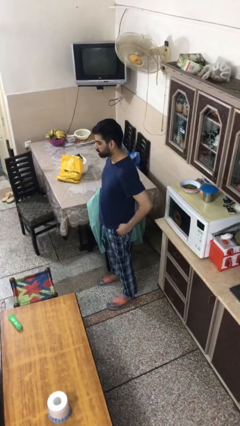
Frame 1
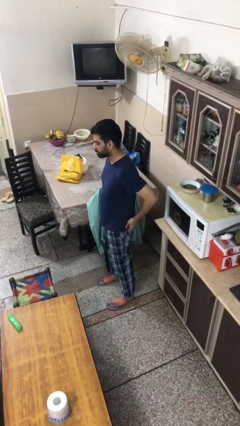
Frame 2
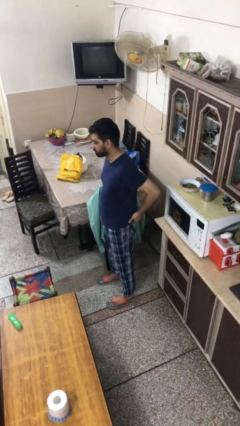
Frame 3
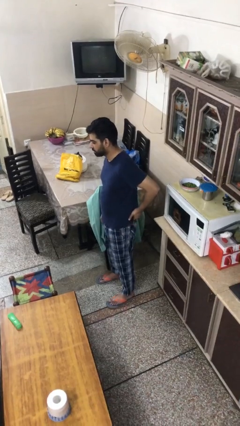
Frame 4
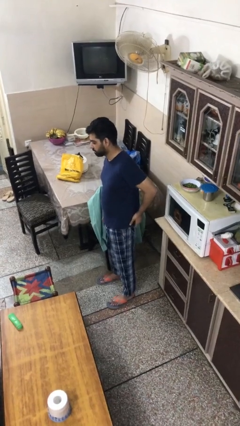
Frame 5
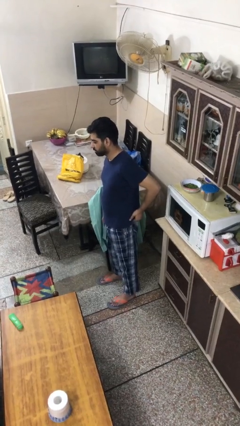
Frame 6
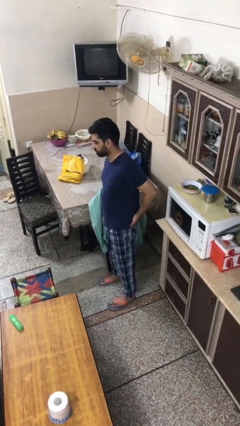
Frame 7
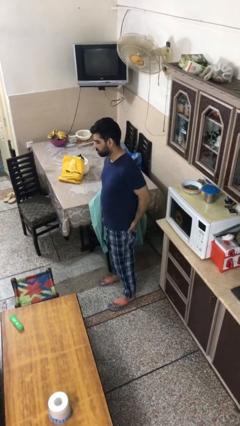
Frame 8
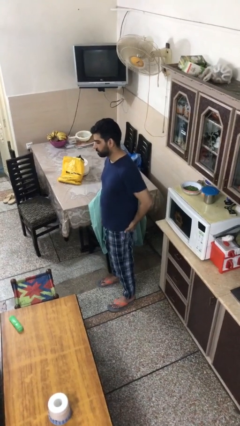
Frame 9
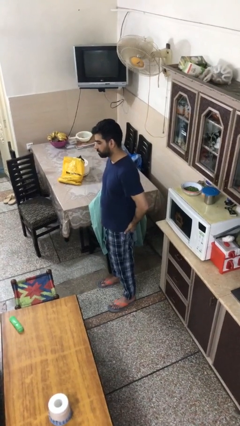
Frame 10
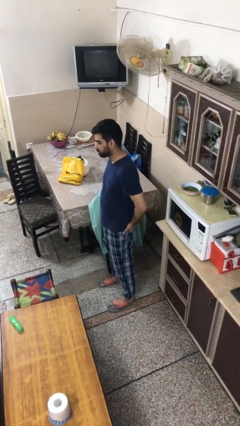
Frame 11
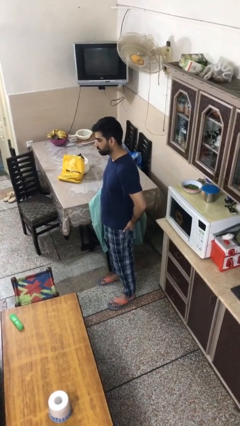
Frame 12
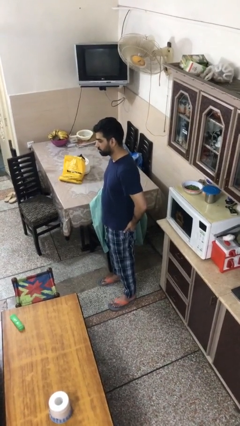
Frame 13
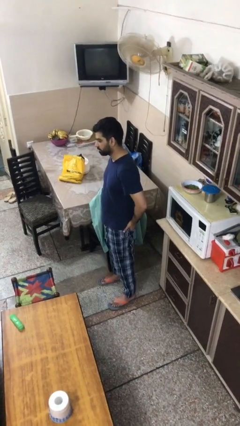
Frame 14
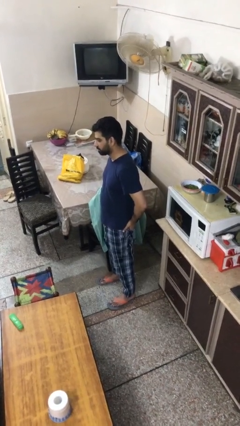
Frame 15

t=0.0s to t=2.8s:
person puts hands in back pockets

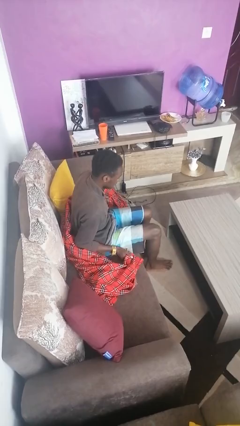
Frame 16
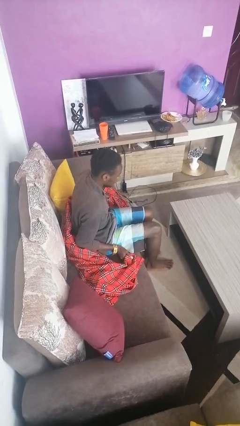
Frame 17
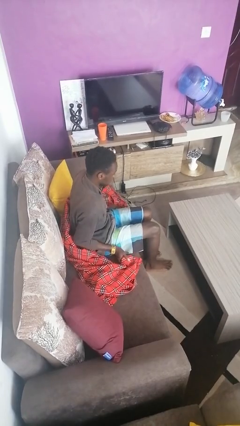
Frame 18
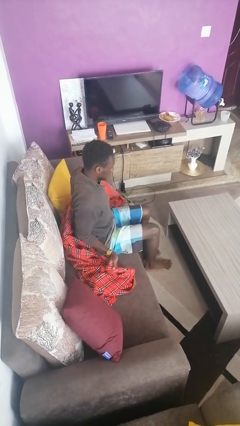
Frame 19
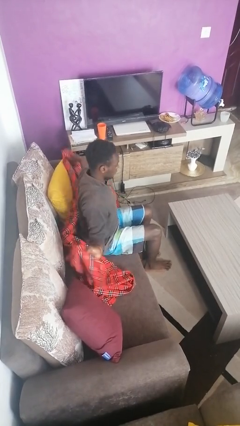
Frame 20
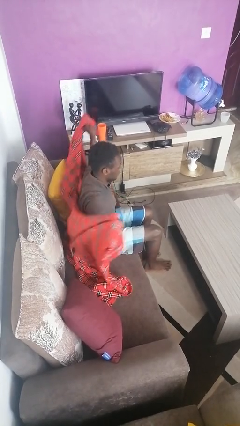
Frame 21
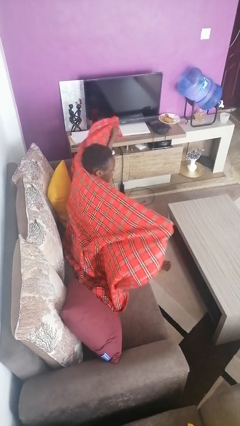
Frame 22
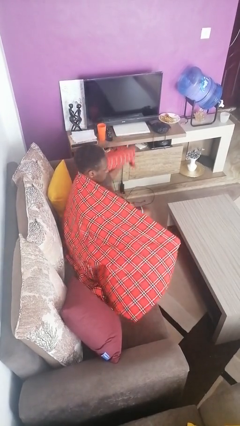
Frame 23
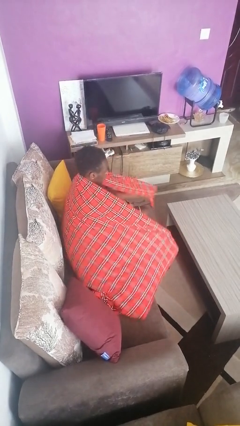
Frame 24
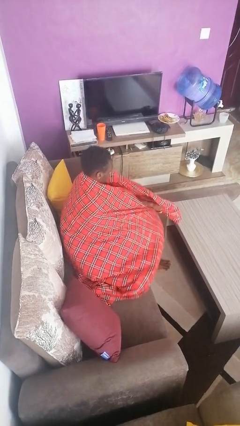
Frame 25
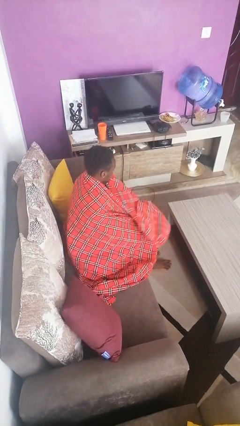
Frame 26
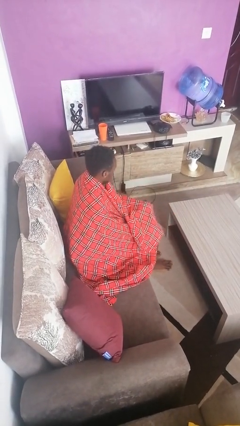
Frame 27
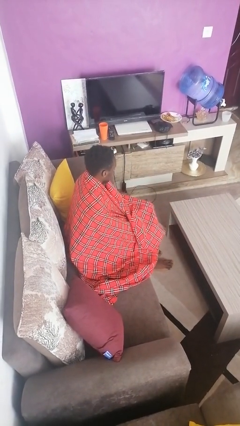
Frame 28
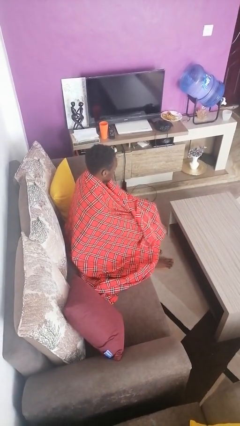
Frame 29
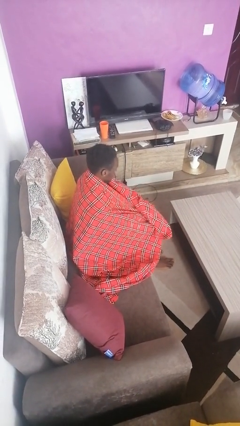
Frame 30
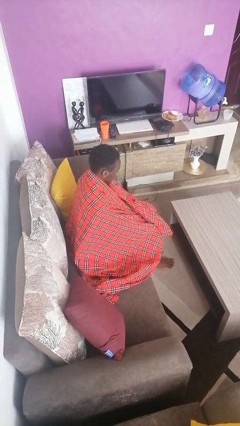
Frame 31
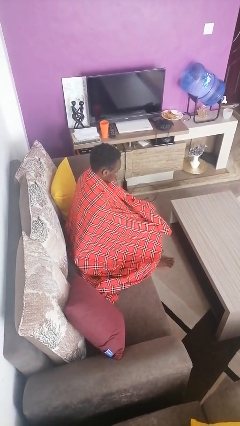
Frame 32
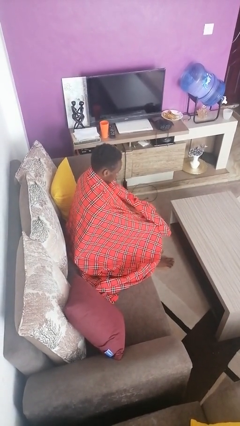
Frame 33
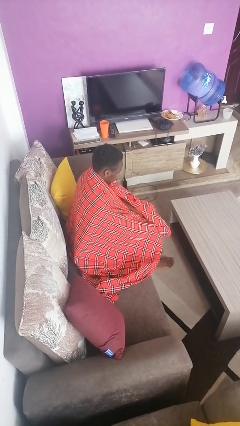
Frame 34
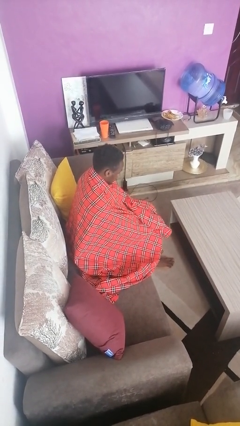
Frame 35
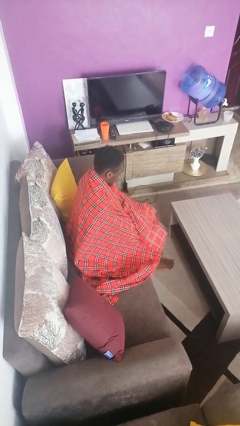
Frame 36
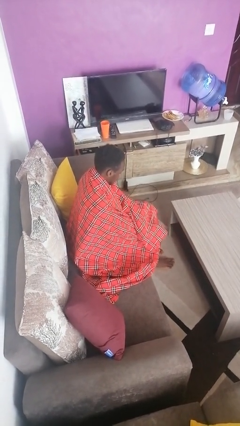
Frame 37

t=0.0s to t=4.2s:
person covers with blanket

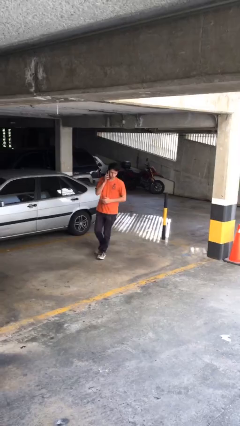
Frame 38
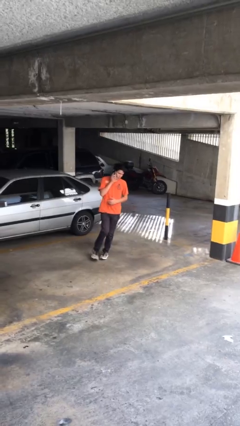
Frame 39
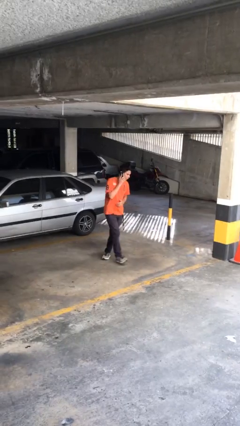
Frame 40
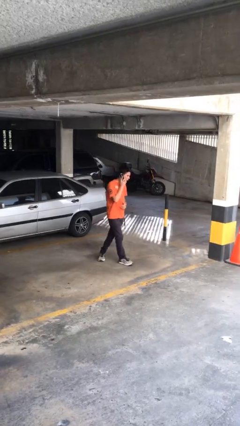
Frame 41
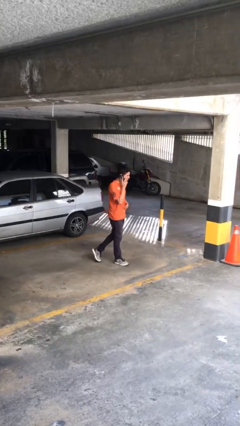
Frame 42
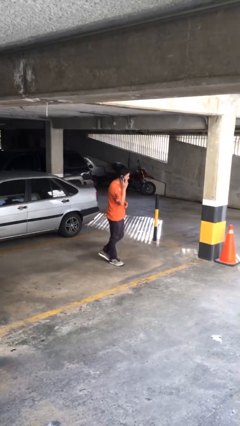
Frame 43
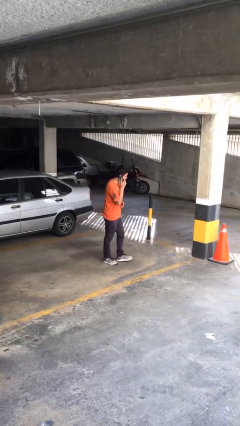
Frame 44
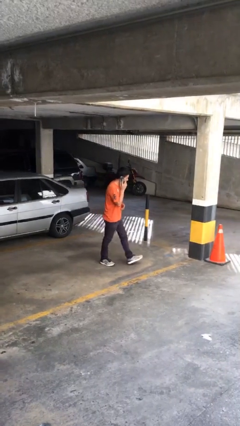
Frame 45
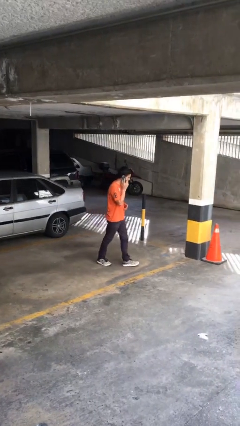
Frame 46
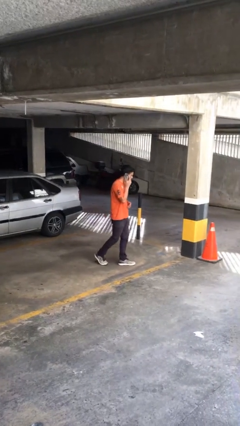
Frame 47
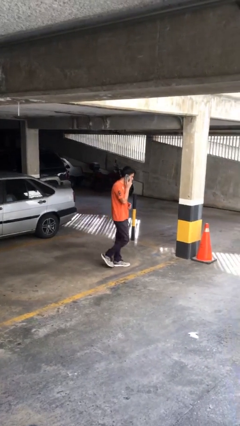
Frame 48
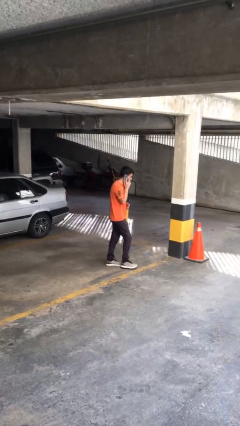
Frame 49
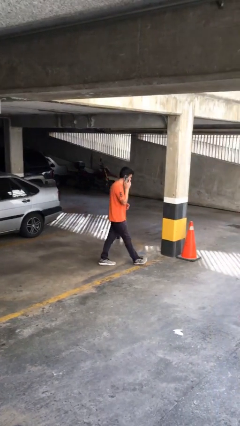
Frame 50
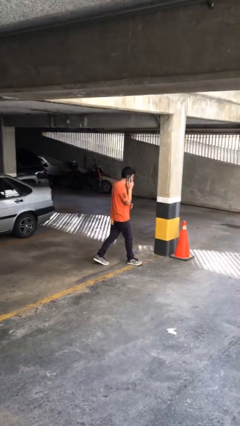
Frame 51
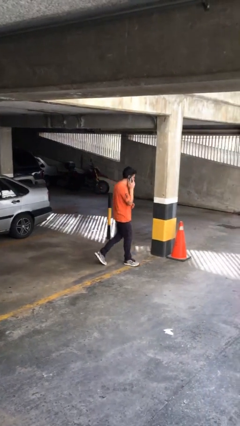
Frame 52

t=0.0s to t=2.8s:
person talks on phone

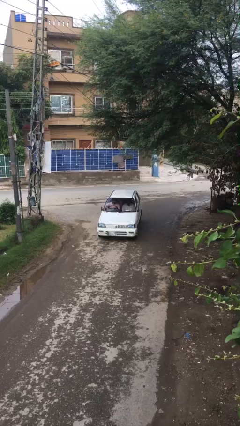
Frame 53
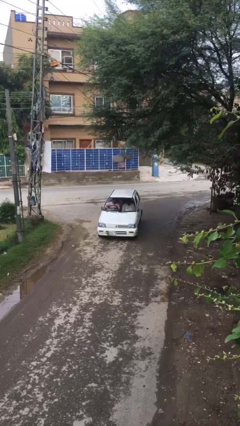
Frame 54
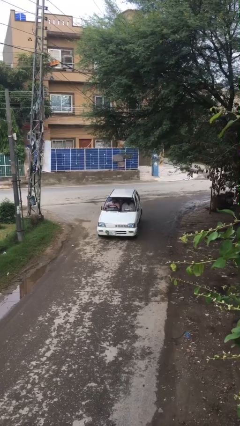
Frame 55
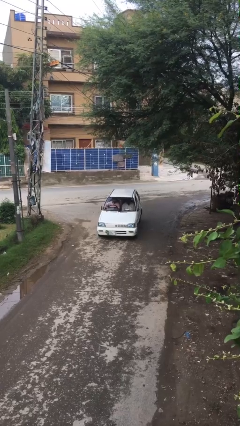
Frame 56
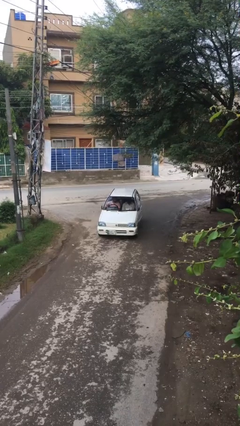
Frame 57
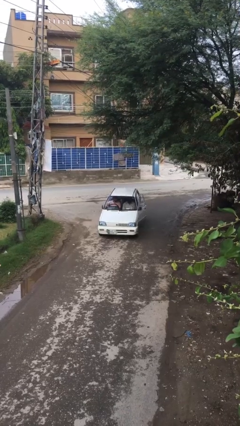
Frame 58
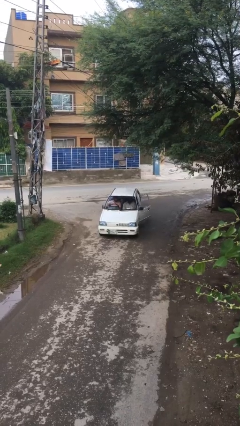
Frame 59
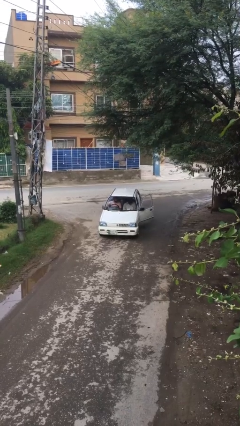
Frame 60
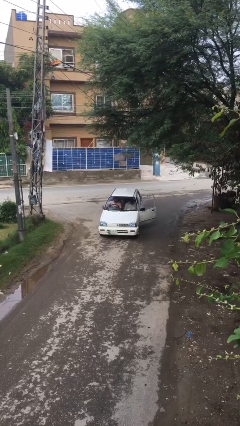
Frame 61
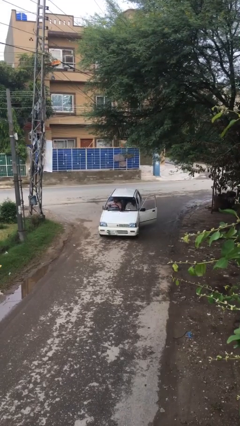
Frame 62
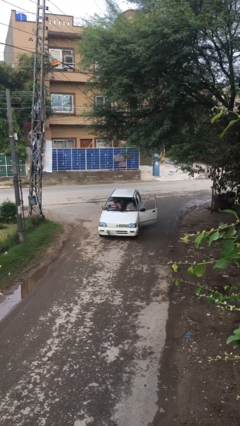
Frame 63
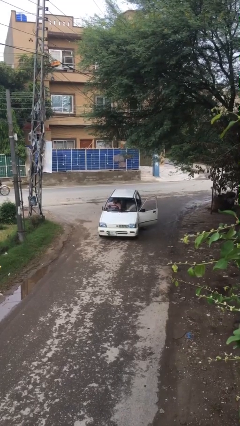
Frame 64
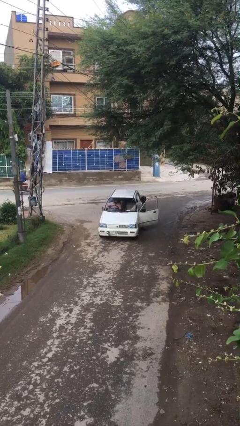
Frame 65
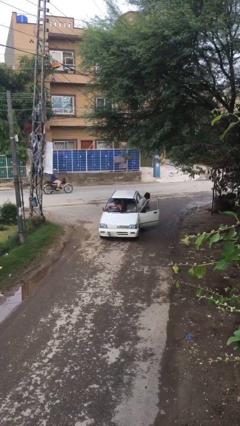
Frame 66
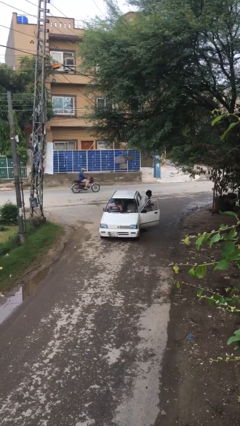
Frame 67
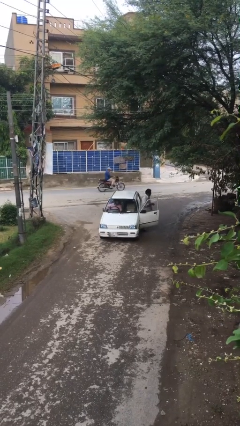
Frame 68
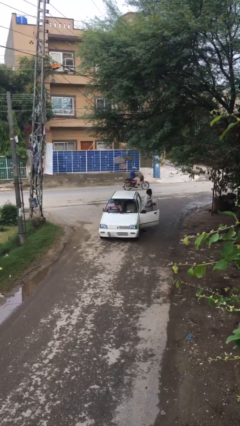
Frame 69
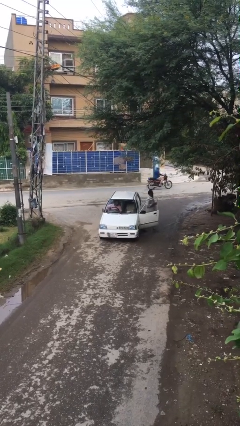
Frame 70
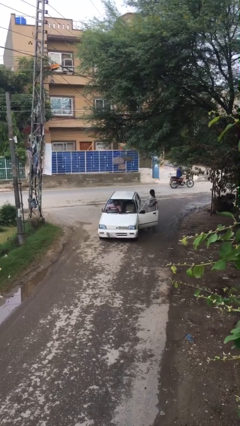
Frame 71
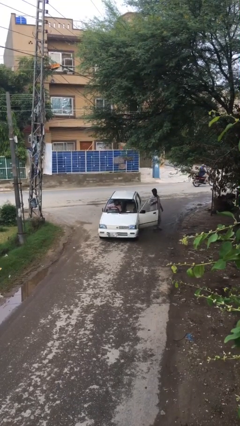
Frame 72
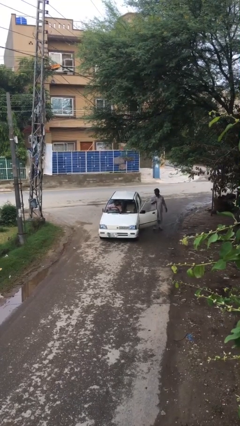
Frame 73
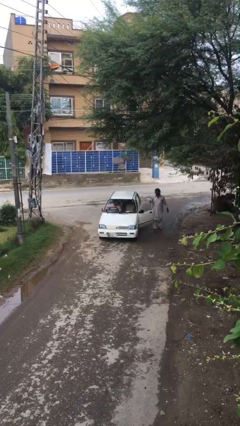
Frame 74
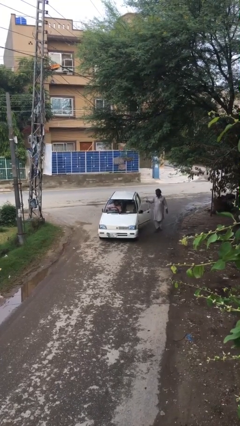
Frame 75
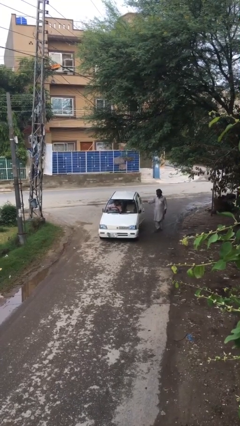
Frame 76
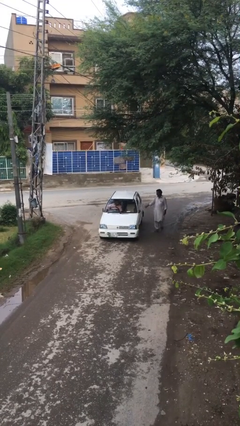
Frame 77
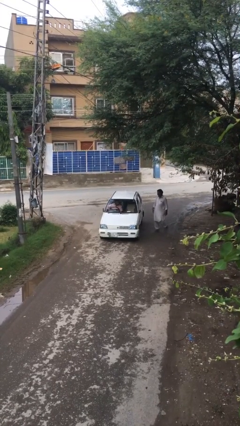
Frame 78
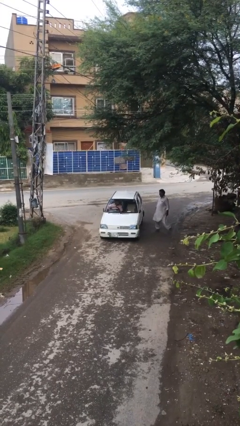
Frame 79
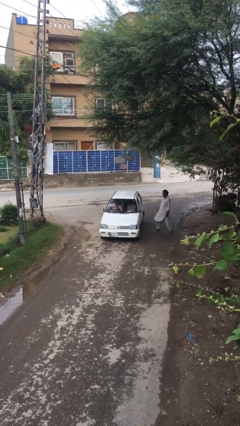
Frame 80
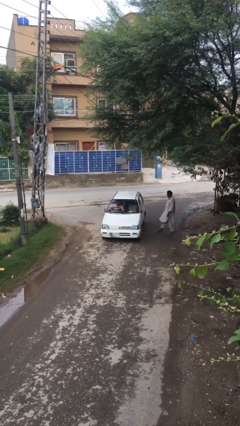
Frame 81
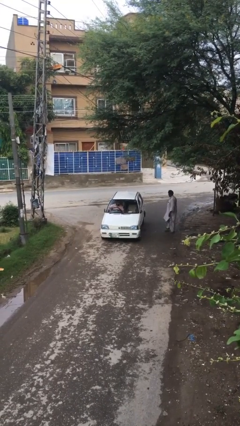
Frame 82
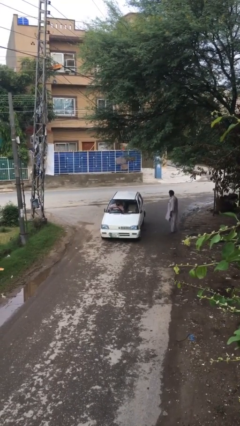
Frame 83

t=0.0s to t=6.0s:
car drops off person

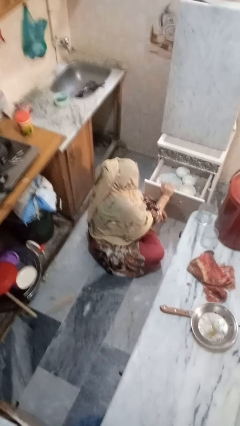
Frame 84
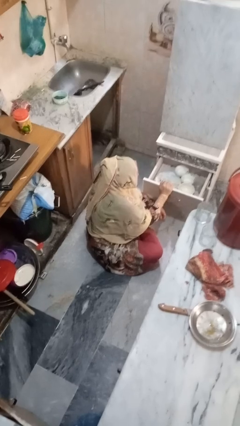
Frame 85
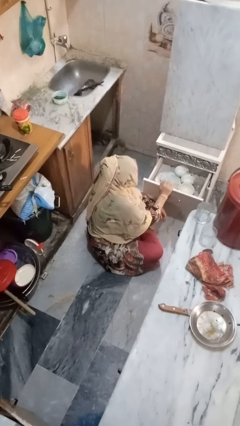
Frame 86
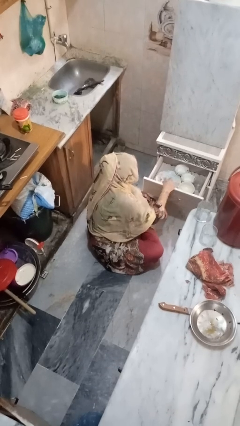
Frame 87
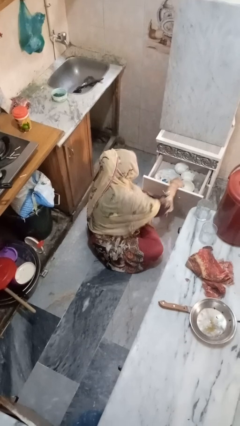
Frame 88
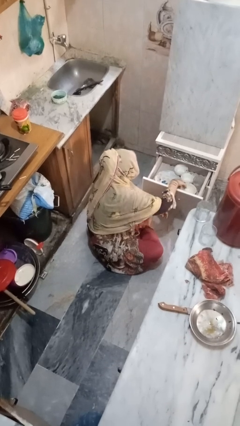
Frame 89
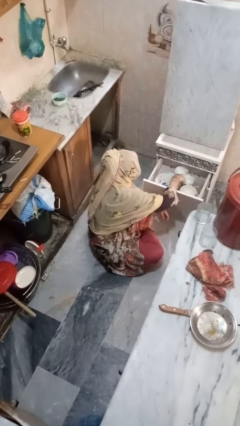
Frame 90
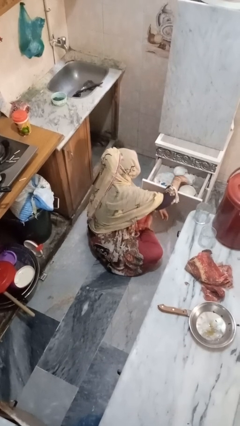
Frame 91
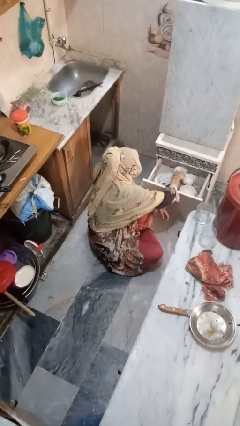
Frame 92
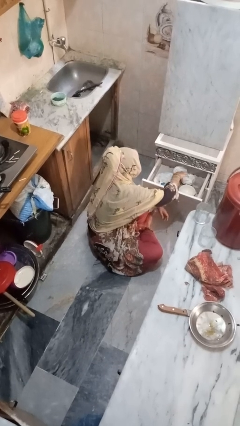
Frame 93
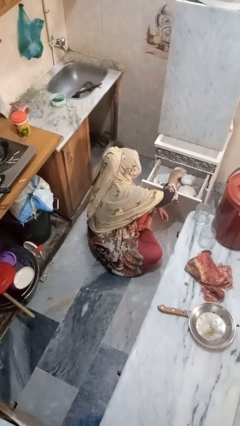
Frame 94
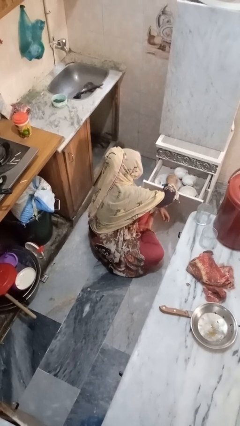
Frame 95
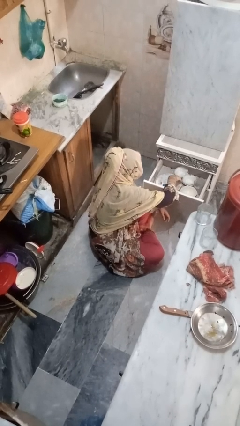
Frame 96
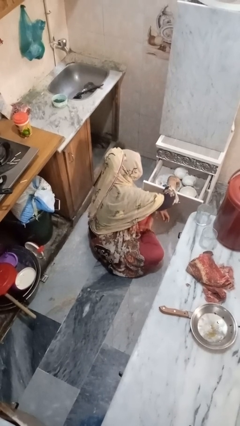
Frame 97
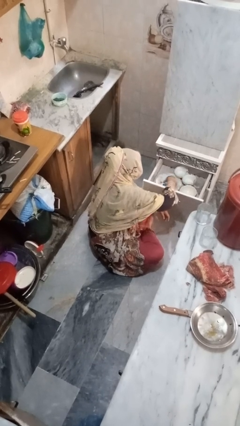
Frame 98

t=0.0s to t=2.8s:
person searches in kitchen drawer
